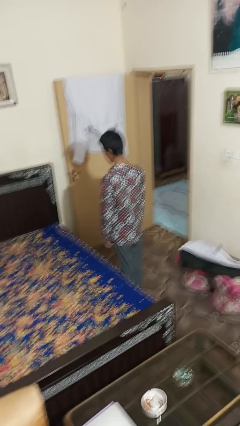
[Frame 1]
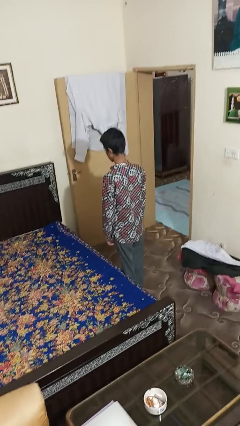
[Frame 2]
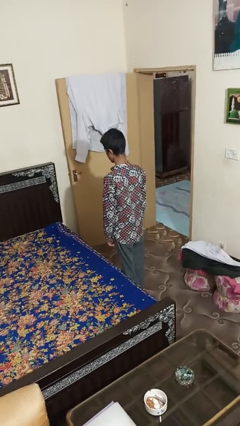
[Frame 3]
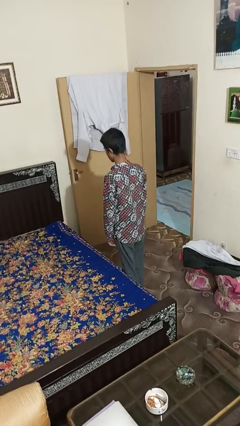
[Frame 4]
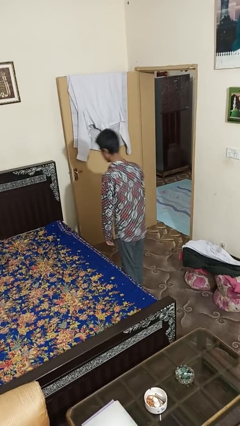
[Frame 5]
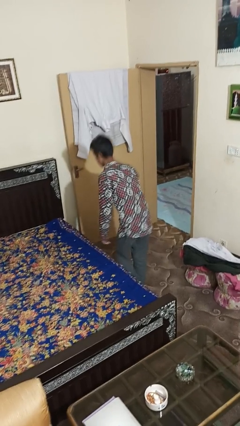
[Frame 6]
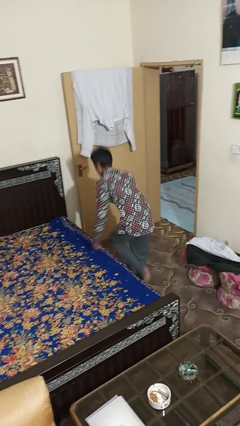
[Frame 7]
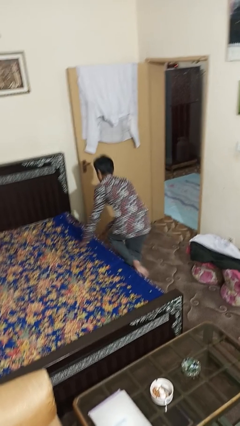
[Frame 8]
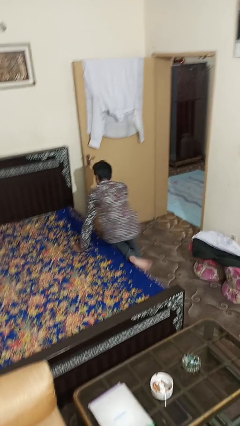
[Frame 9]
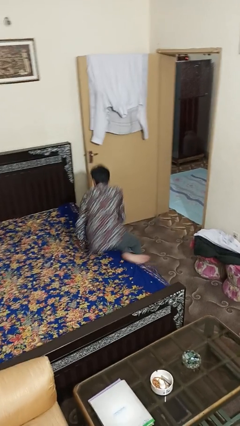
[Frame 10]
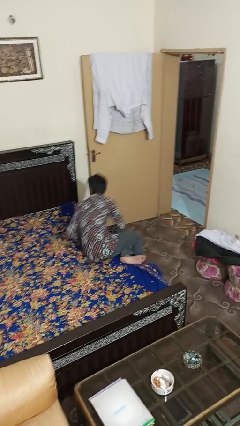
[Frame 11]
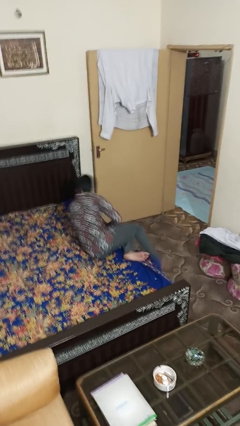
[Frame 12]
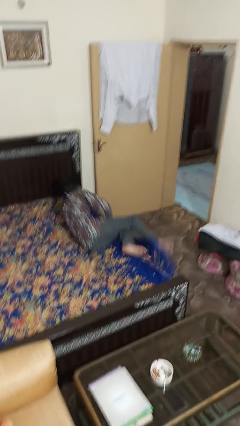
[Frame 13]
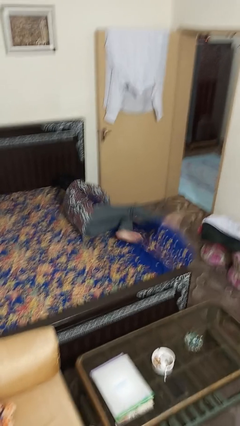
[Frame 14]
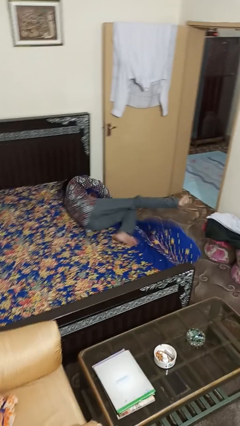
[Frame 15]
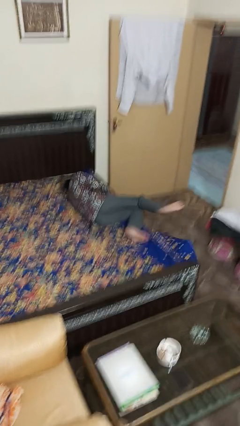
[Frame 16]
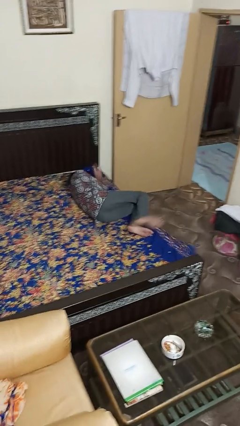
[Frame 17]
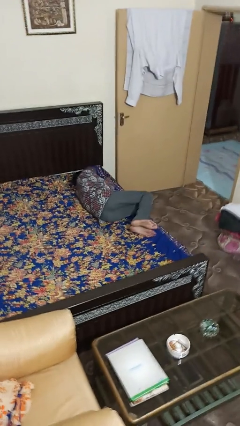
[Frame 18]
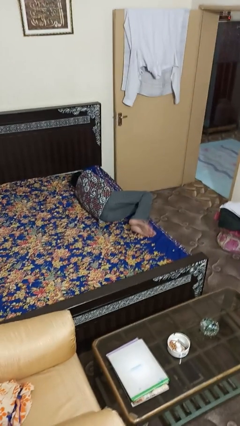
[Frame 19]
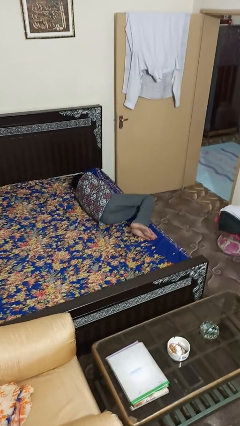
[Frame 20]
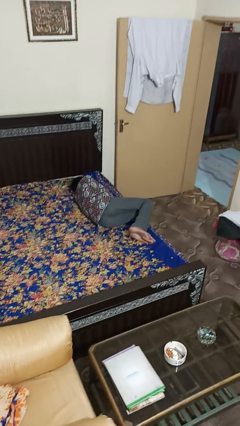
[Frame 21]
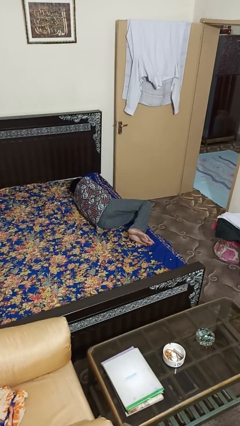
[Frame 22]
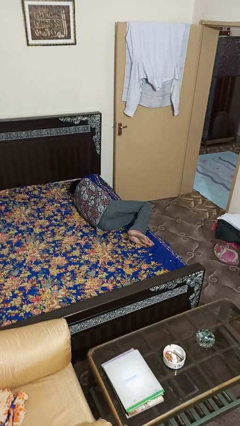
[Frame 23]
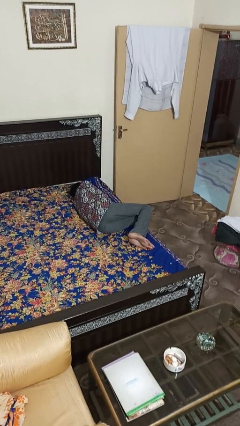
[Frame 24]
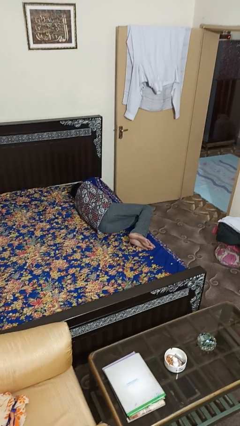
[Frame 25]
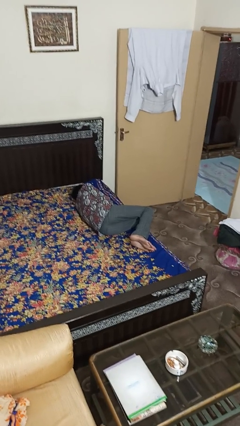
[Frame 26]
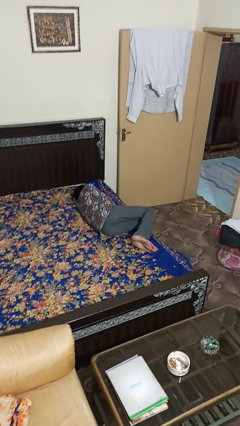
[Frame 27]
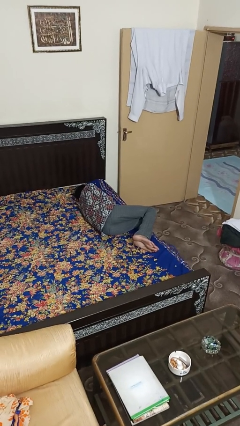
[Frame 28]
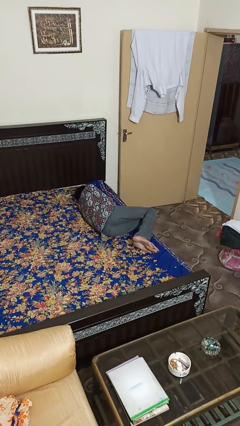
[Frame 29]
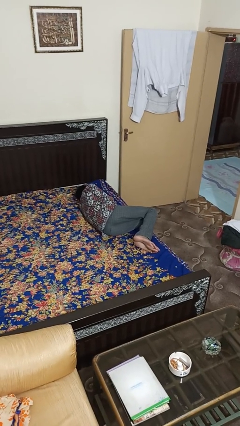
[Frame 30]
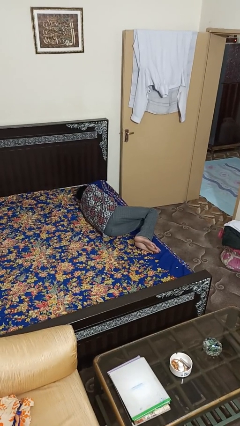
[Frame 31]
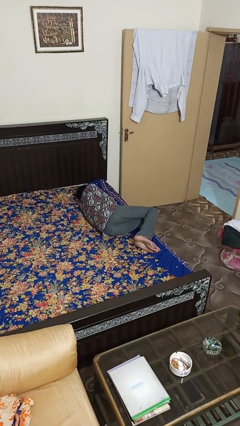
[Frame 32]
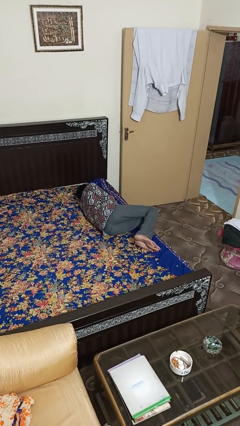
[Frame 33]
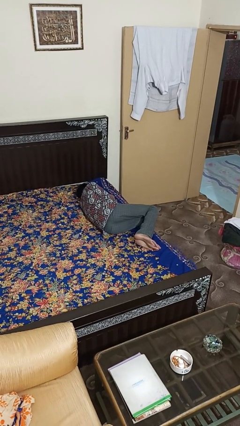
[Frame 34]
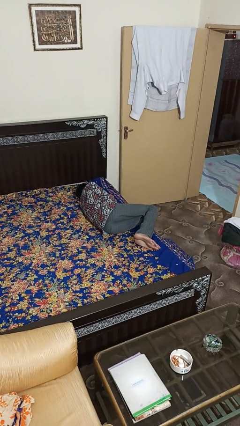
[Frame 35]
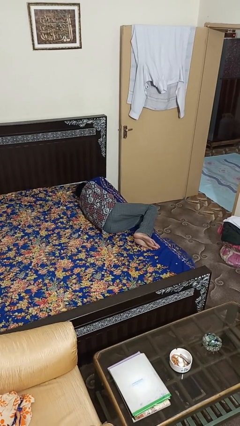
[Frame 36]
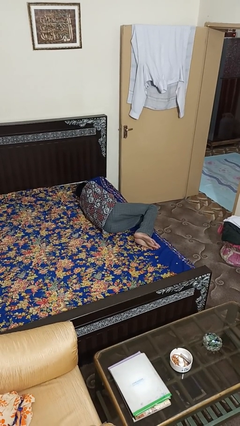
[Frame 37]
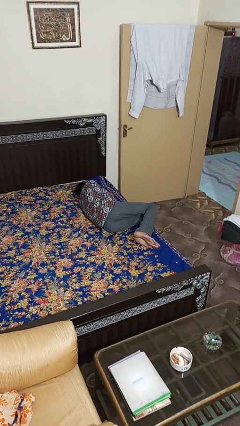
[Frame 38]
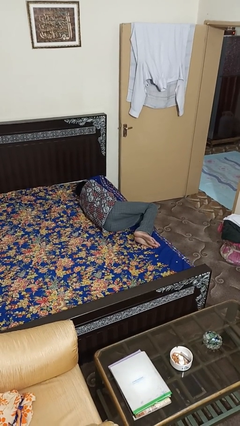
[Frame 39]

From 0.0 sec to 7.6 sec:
person lies down on bed

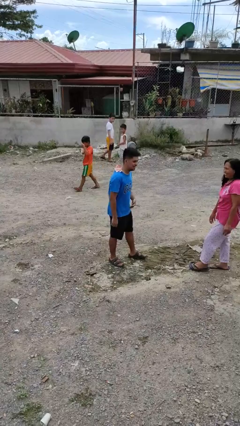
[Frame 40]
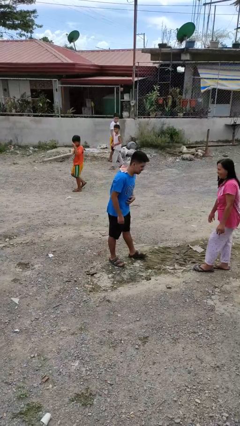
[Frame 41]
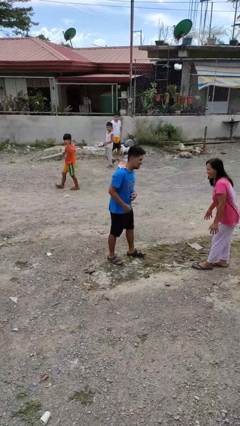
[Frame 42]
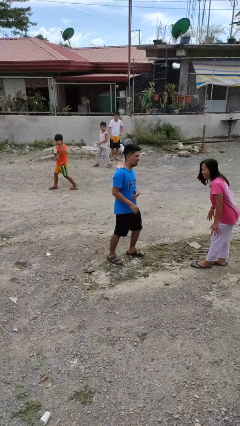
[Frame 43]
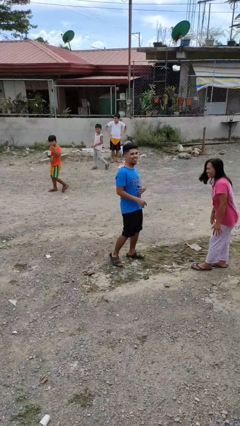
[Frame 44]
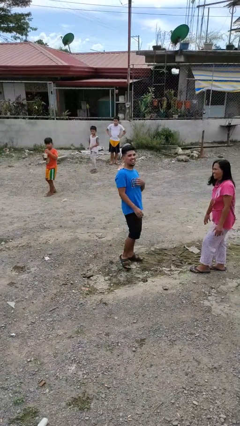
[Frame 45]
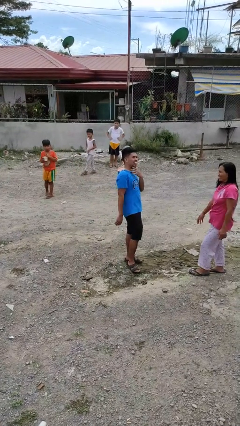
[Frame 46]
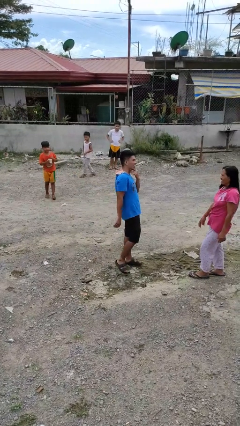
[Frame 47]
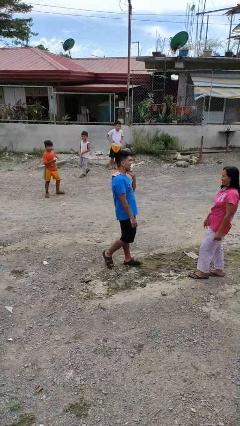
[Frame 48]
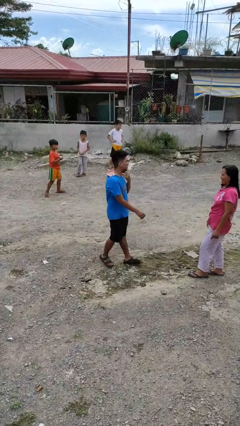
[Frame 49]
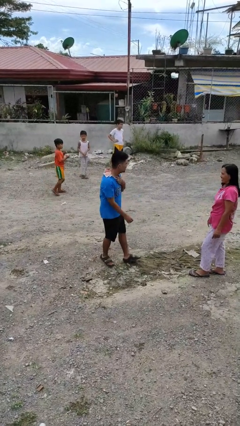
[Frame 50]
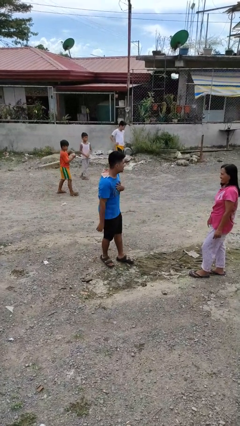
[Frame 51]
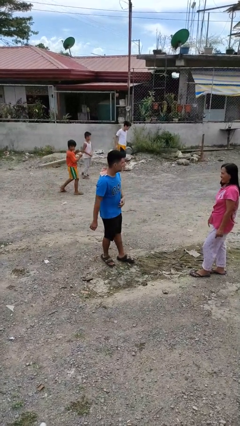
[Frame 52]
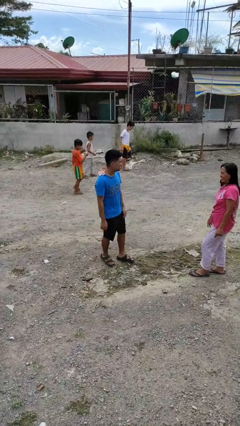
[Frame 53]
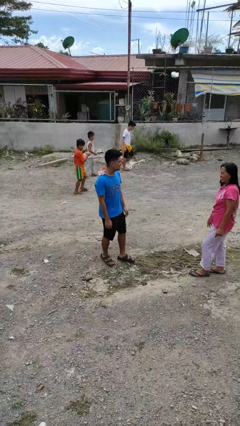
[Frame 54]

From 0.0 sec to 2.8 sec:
person laughs with person

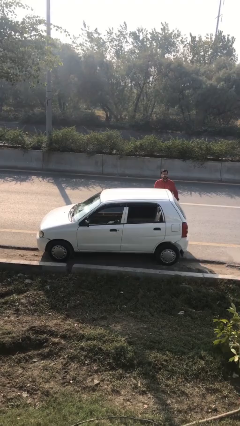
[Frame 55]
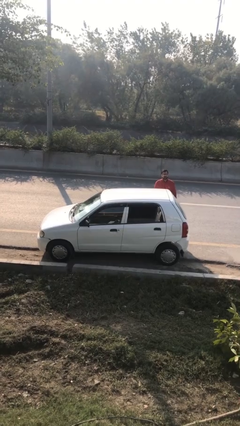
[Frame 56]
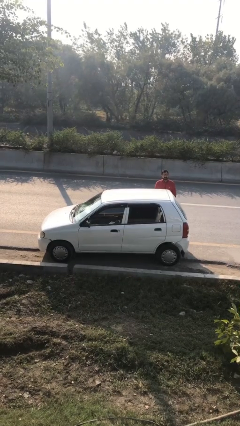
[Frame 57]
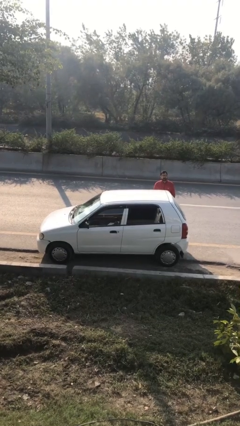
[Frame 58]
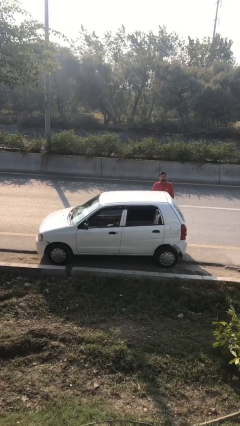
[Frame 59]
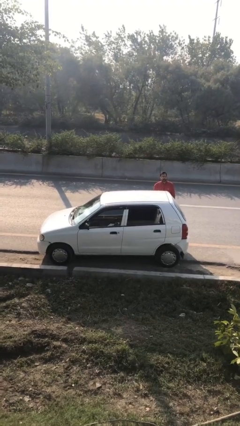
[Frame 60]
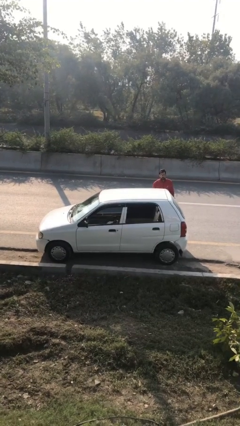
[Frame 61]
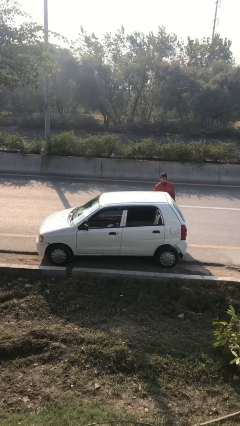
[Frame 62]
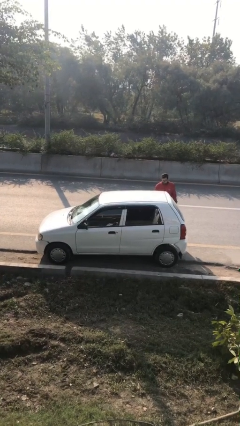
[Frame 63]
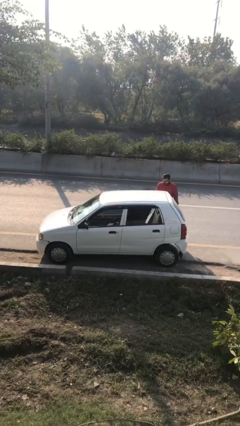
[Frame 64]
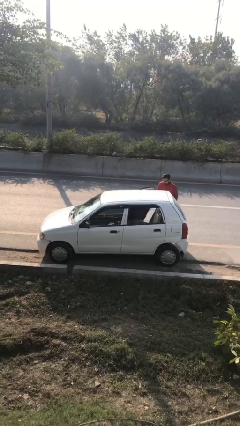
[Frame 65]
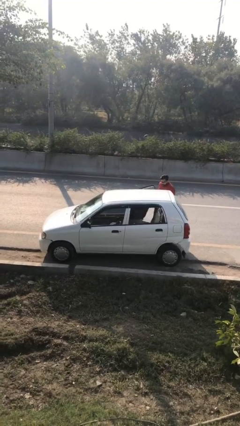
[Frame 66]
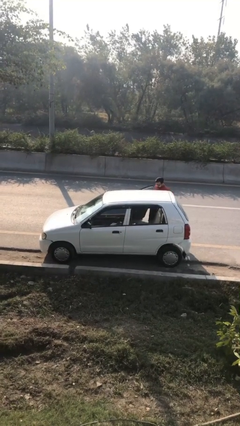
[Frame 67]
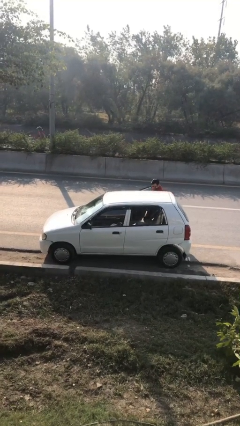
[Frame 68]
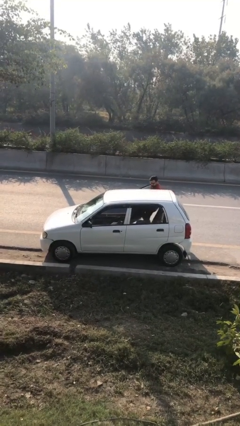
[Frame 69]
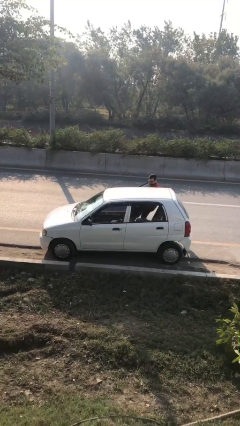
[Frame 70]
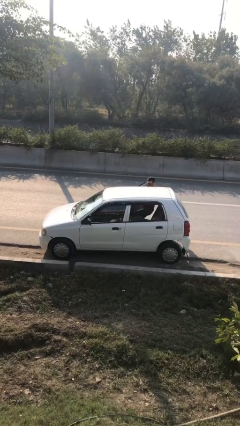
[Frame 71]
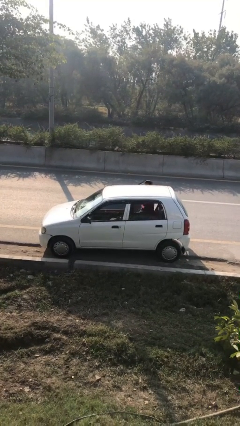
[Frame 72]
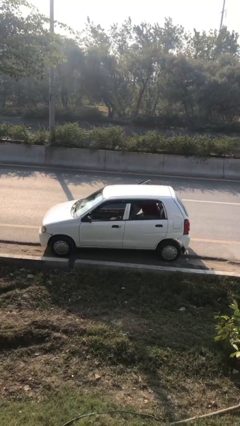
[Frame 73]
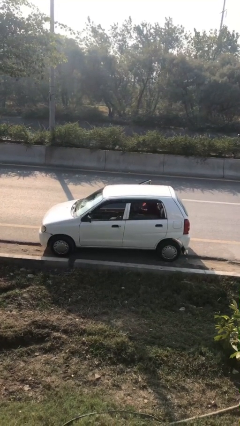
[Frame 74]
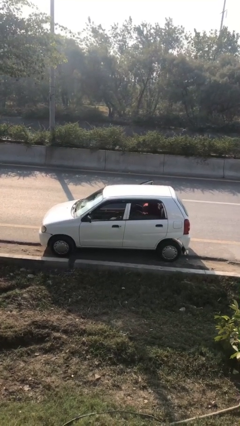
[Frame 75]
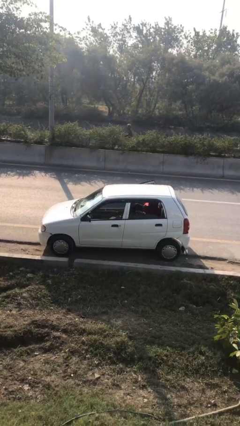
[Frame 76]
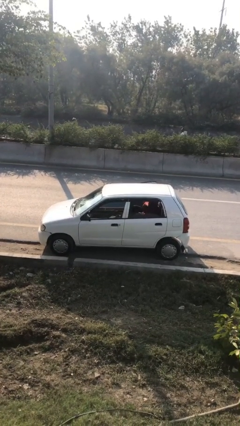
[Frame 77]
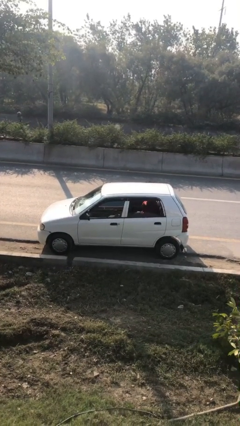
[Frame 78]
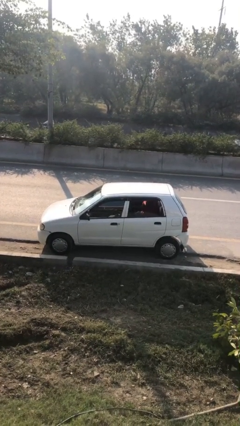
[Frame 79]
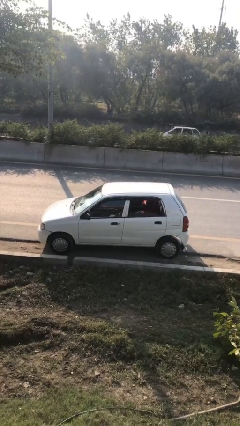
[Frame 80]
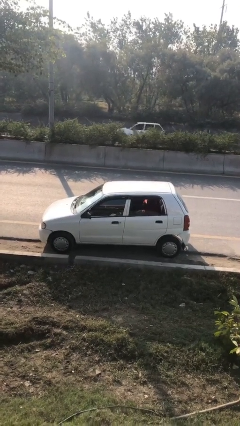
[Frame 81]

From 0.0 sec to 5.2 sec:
car picks up person

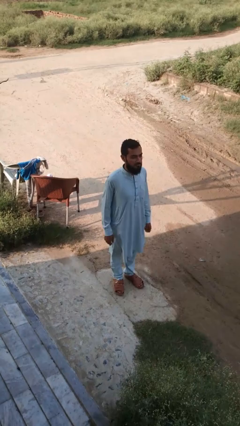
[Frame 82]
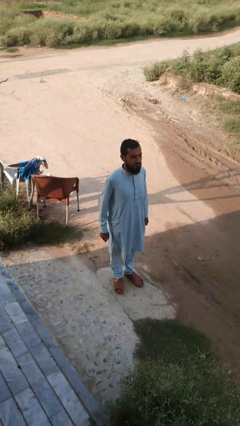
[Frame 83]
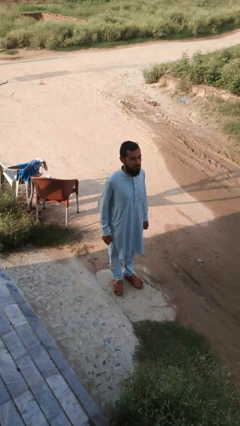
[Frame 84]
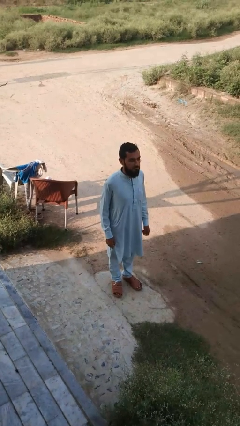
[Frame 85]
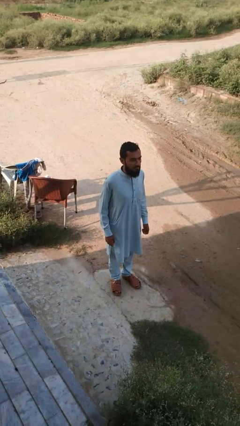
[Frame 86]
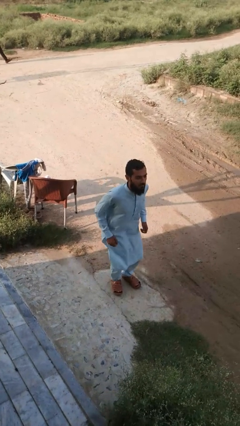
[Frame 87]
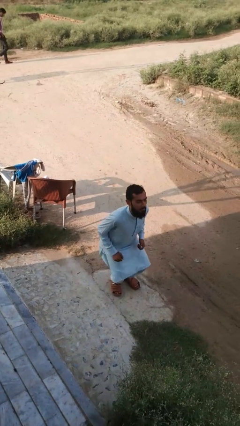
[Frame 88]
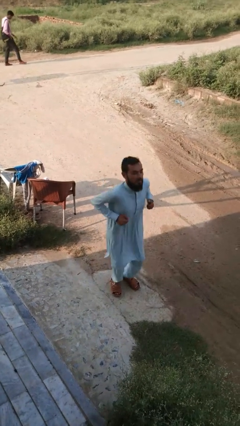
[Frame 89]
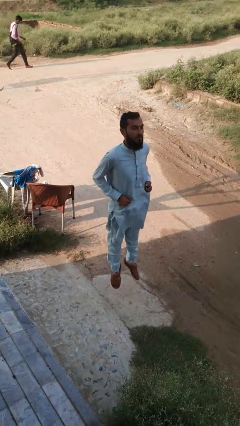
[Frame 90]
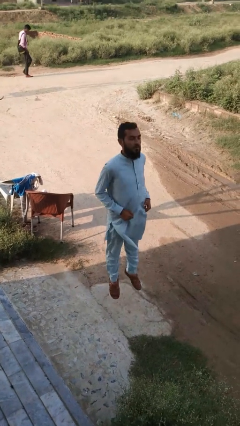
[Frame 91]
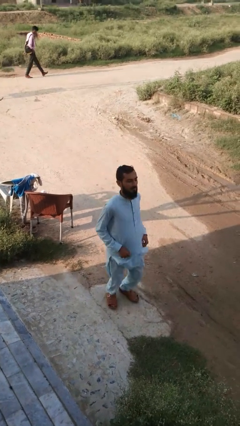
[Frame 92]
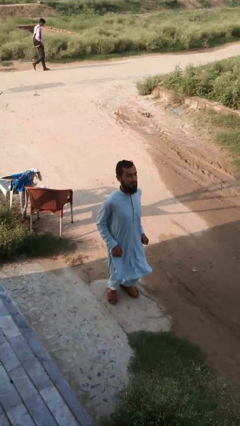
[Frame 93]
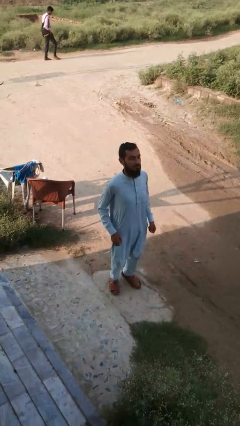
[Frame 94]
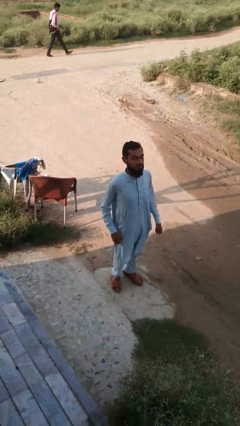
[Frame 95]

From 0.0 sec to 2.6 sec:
person jumps
